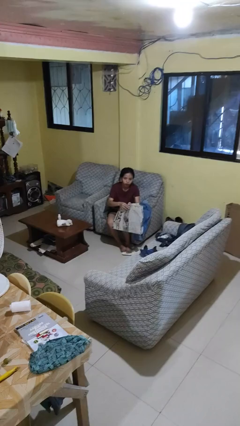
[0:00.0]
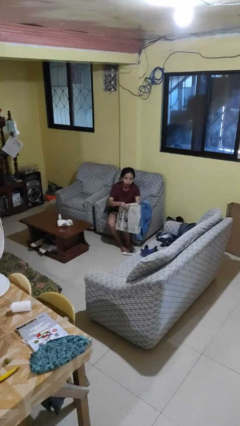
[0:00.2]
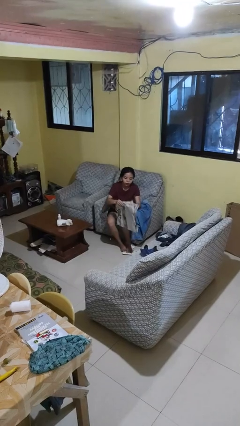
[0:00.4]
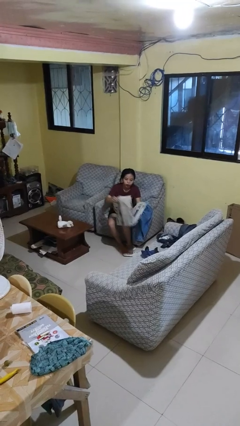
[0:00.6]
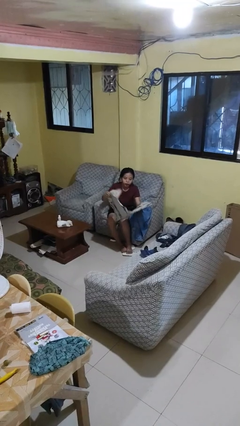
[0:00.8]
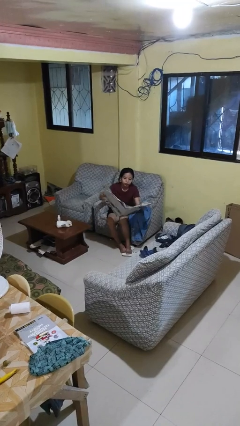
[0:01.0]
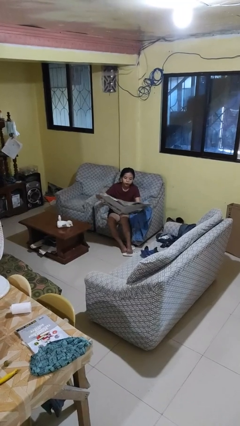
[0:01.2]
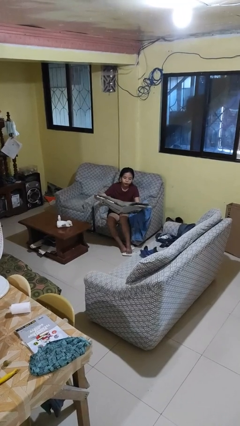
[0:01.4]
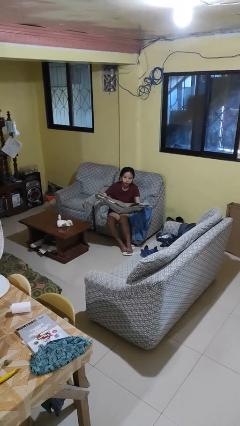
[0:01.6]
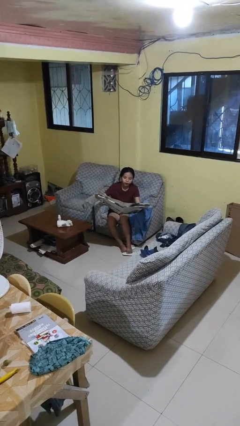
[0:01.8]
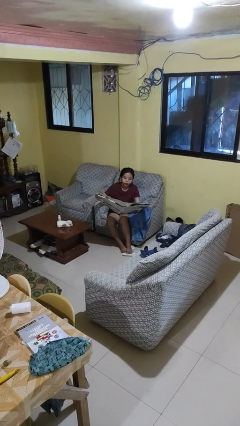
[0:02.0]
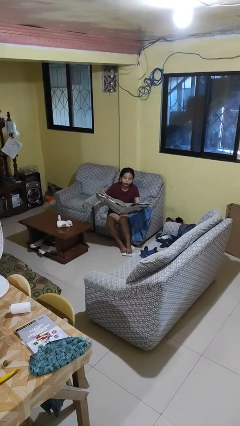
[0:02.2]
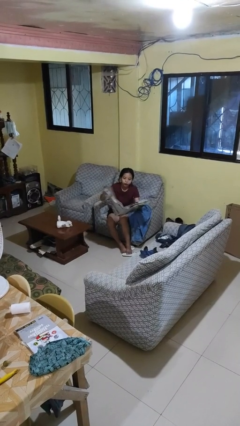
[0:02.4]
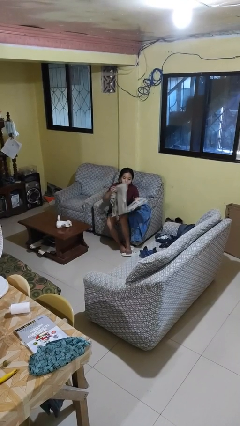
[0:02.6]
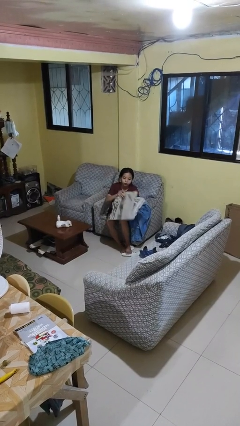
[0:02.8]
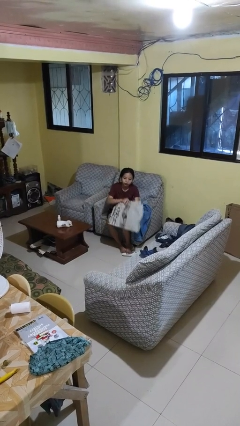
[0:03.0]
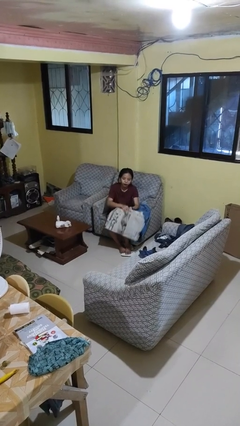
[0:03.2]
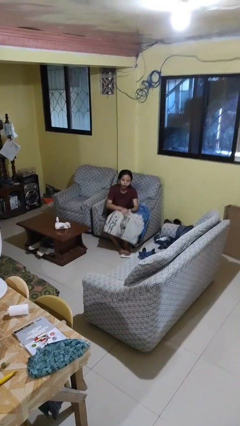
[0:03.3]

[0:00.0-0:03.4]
person reads newspaper

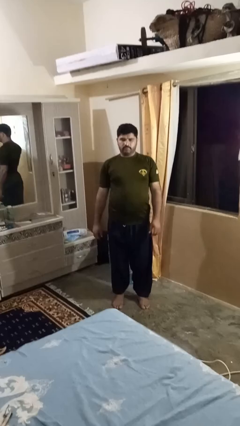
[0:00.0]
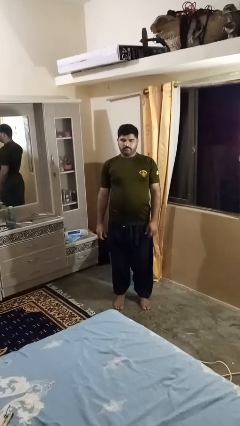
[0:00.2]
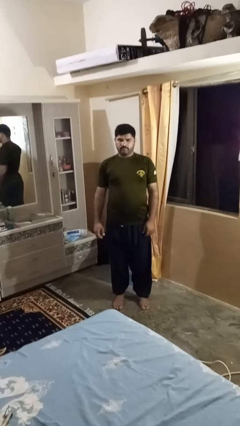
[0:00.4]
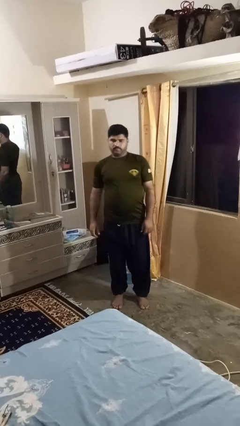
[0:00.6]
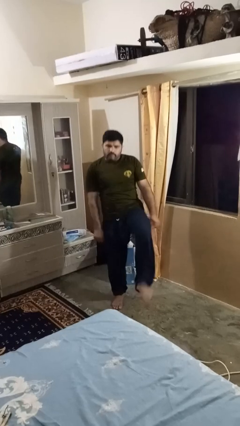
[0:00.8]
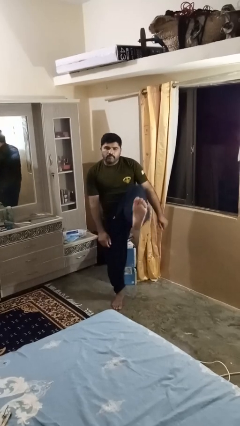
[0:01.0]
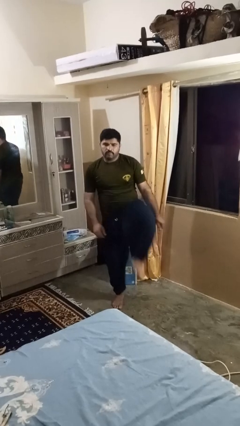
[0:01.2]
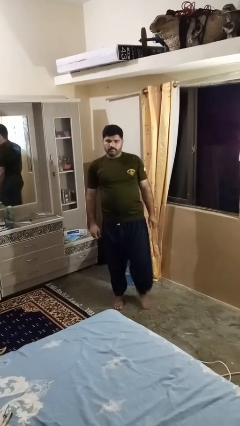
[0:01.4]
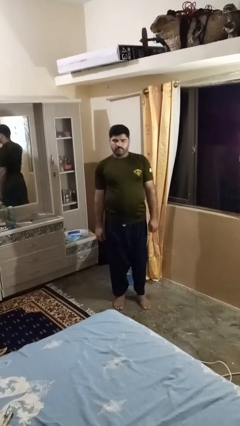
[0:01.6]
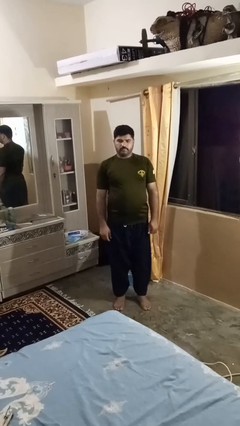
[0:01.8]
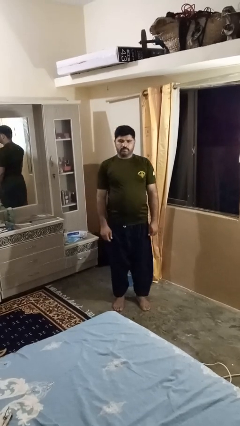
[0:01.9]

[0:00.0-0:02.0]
person karate kicks

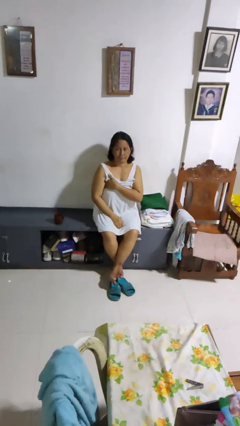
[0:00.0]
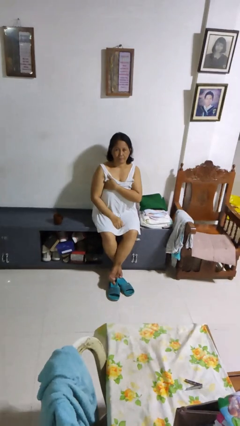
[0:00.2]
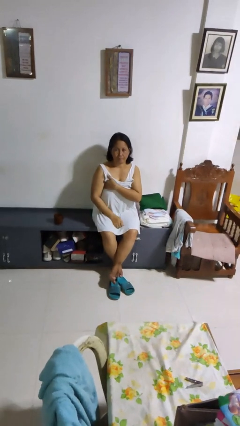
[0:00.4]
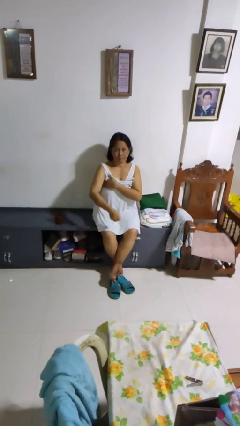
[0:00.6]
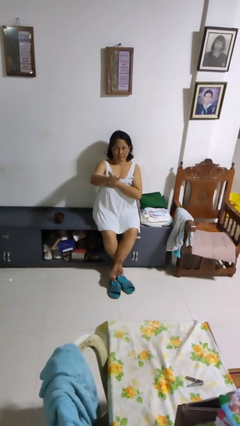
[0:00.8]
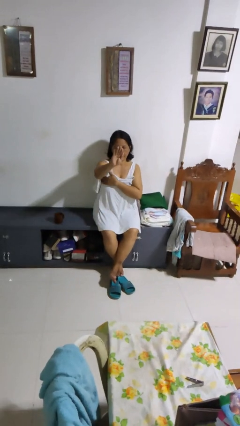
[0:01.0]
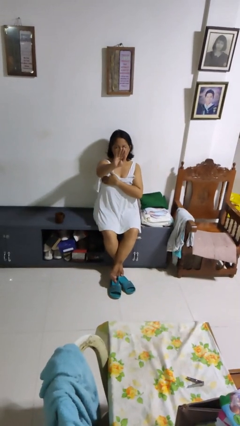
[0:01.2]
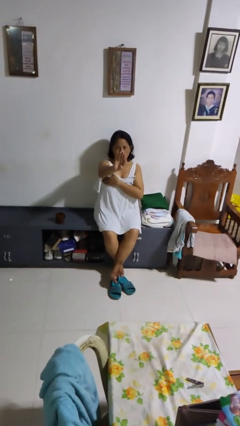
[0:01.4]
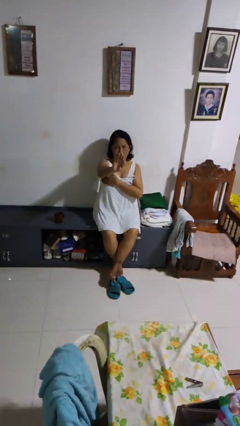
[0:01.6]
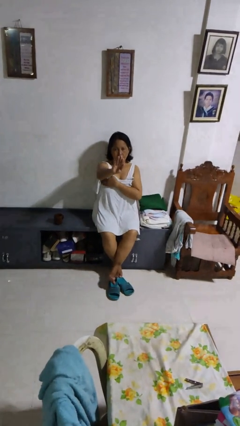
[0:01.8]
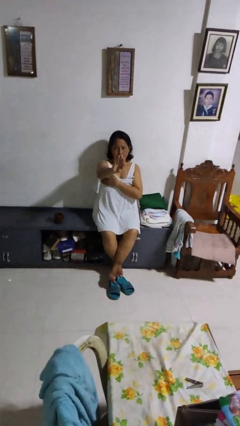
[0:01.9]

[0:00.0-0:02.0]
person gestures stop

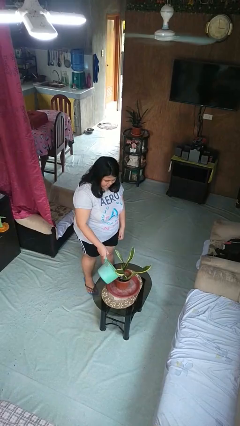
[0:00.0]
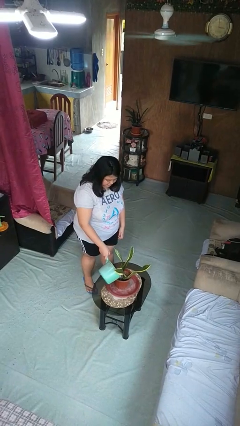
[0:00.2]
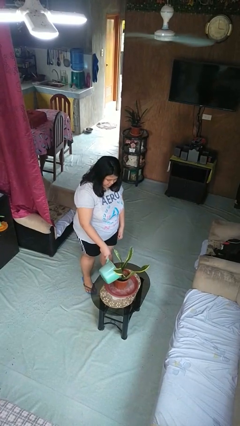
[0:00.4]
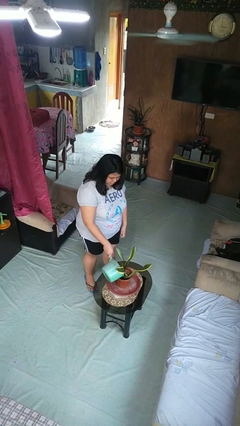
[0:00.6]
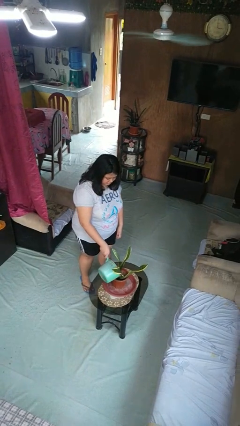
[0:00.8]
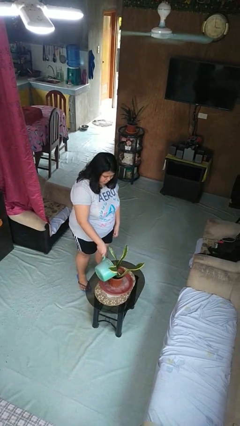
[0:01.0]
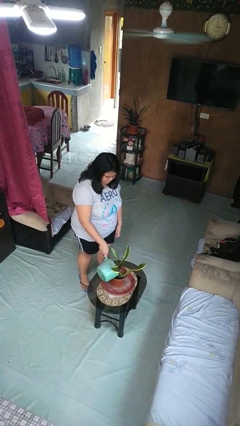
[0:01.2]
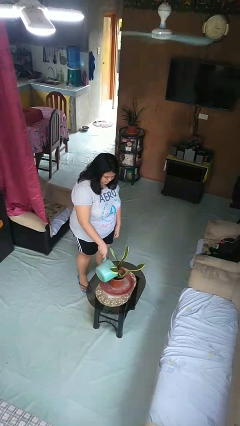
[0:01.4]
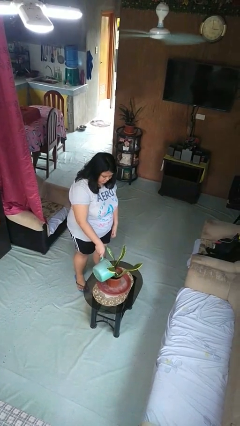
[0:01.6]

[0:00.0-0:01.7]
person waters houseplant

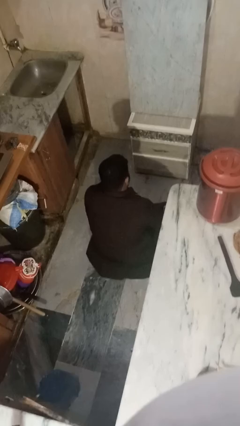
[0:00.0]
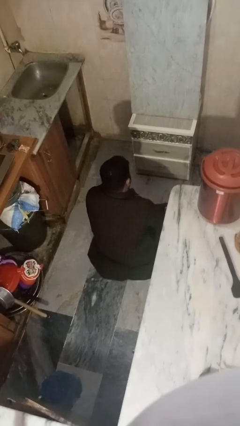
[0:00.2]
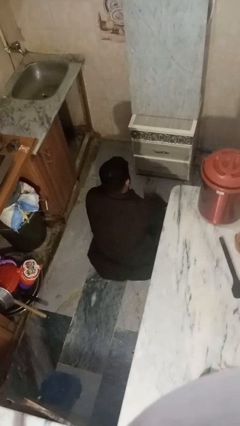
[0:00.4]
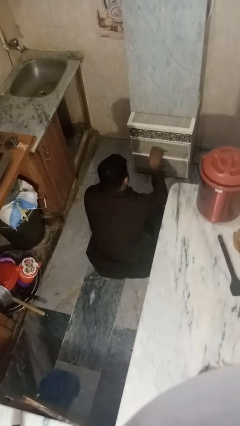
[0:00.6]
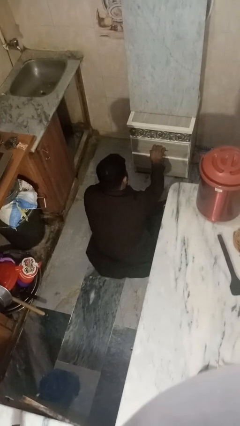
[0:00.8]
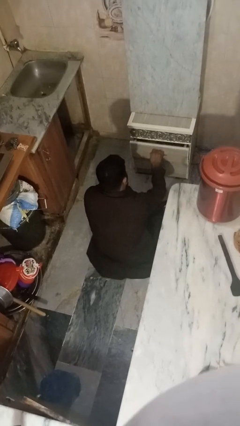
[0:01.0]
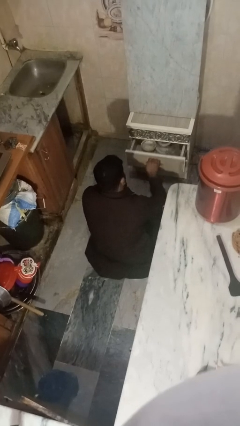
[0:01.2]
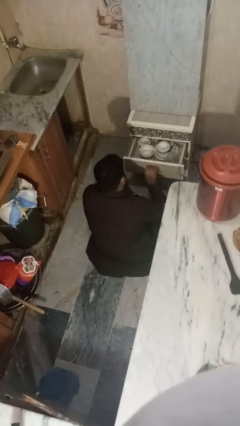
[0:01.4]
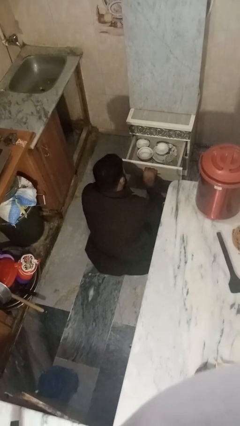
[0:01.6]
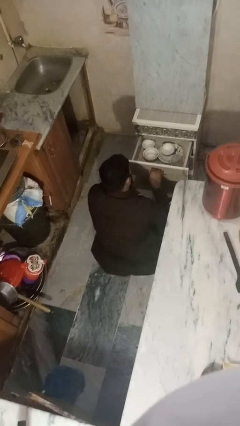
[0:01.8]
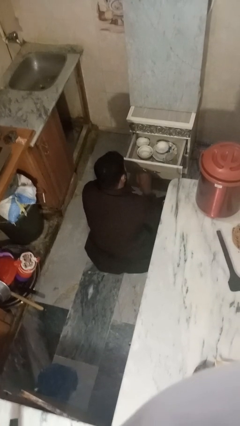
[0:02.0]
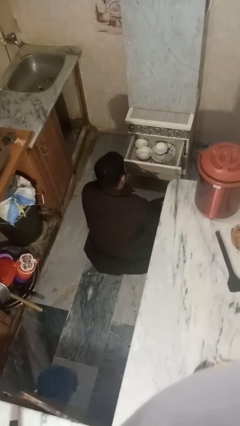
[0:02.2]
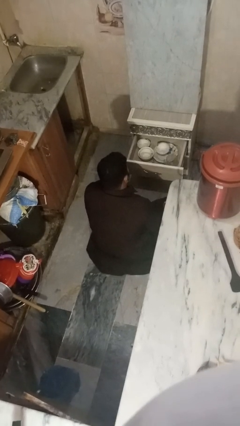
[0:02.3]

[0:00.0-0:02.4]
person opens kitchen drawer

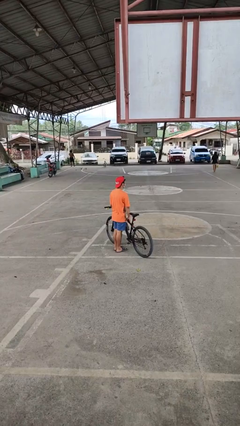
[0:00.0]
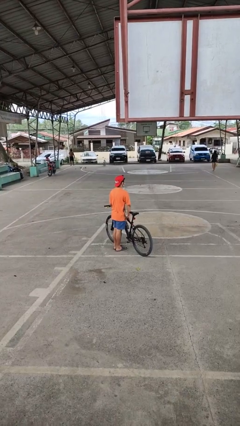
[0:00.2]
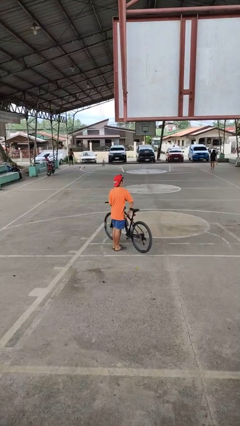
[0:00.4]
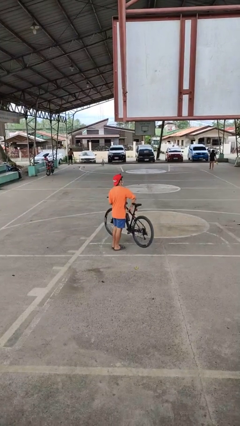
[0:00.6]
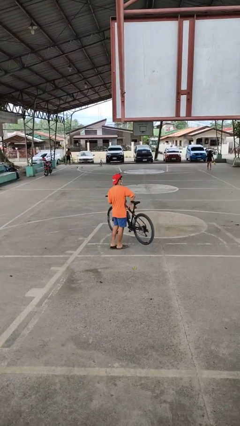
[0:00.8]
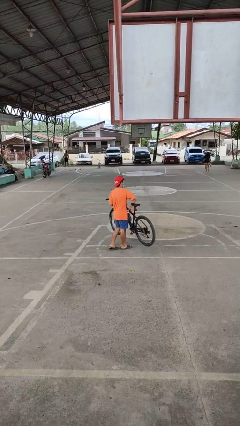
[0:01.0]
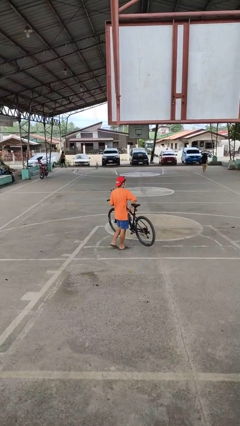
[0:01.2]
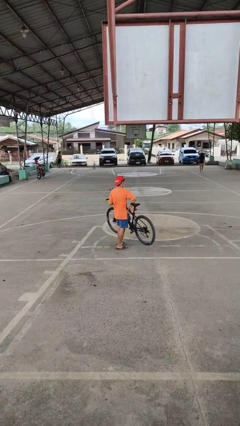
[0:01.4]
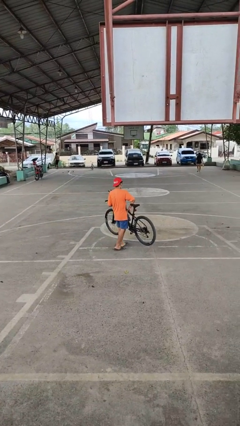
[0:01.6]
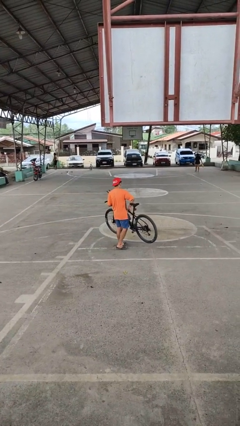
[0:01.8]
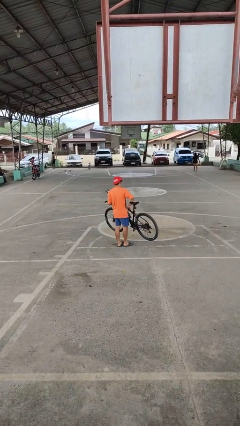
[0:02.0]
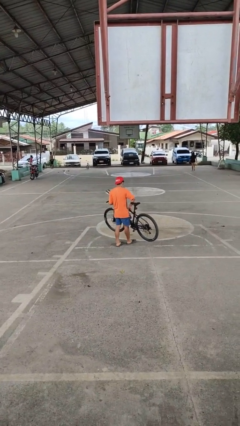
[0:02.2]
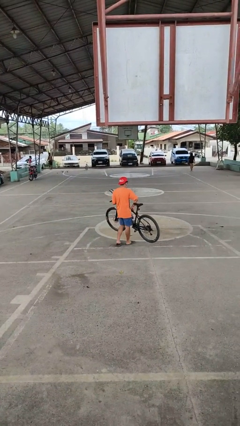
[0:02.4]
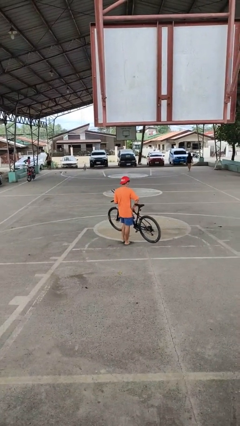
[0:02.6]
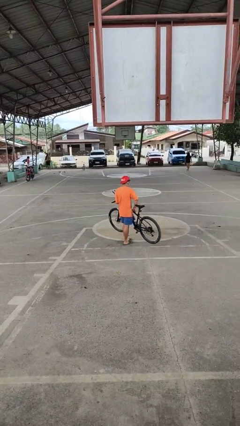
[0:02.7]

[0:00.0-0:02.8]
person carries bicycle

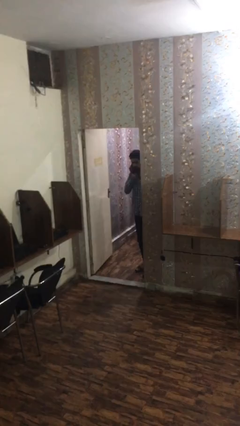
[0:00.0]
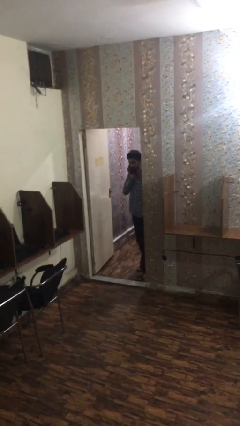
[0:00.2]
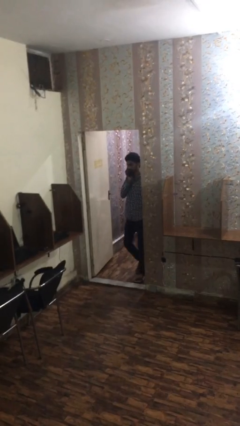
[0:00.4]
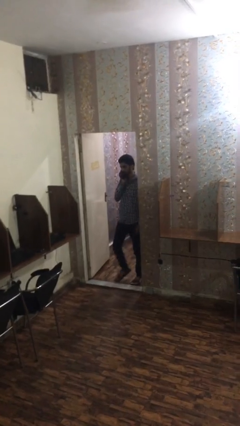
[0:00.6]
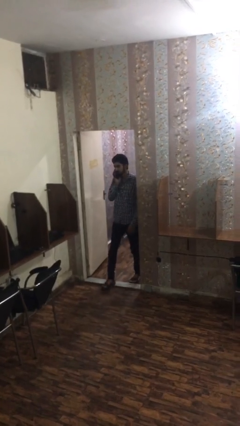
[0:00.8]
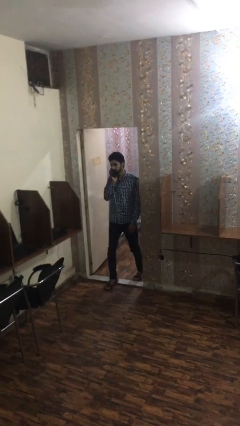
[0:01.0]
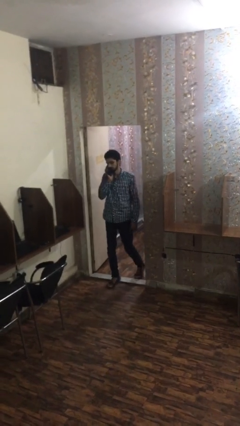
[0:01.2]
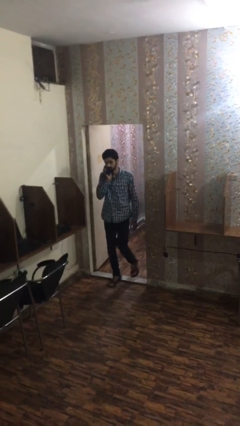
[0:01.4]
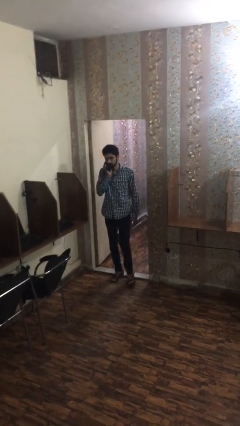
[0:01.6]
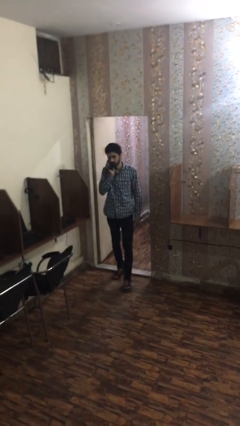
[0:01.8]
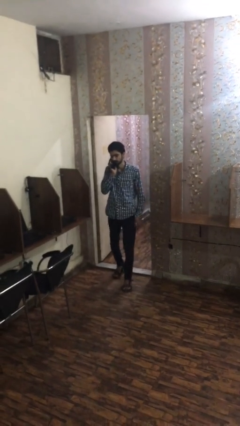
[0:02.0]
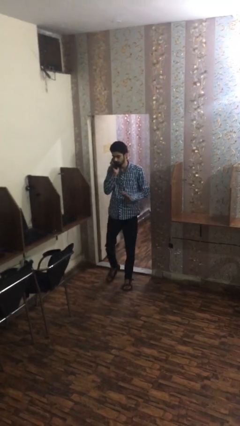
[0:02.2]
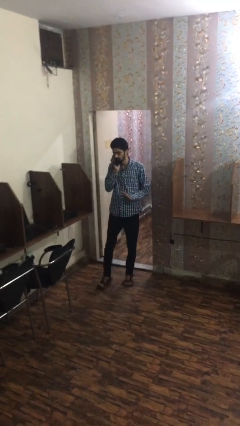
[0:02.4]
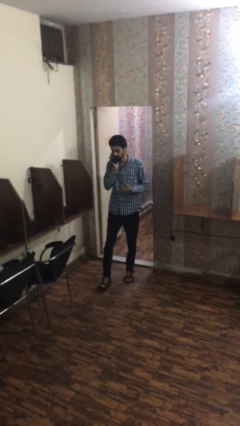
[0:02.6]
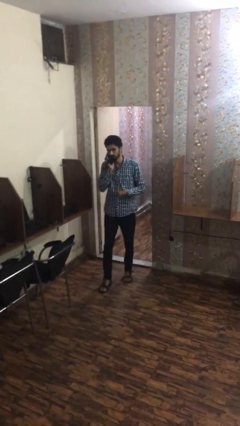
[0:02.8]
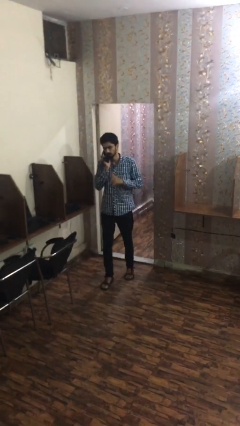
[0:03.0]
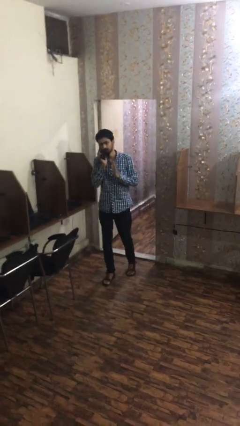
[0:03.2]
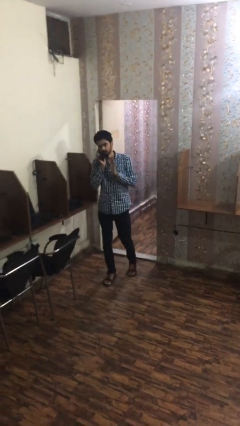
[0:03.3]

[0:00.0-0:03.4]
person enters scene through structure
